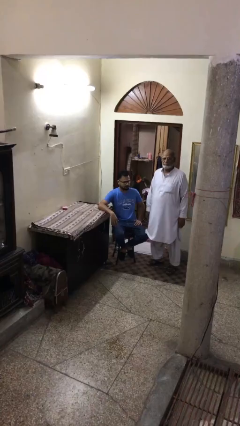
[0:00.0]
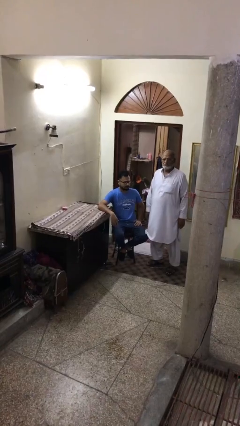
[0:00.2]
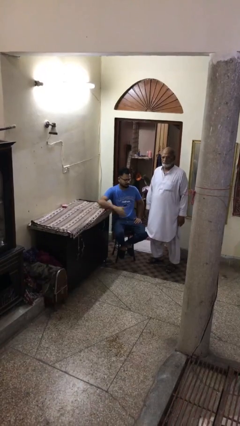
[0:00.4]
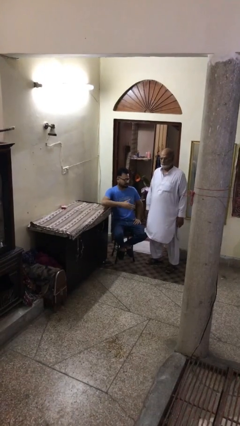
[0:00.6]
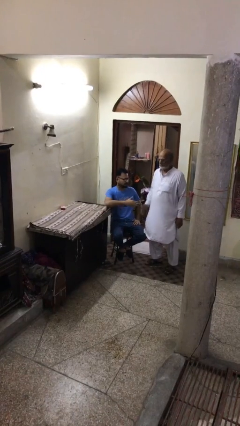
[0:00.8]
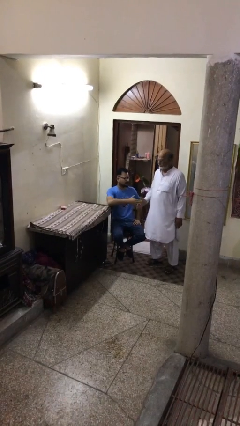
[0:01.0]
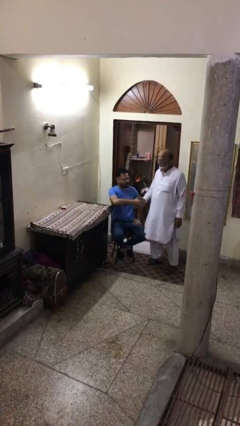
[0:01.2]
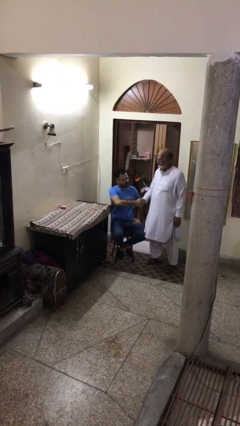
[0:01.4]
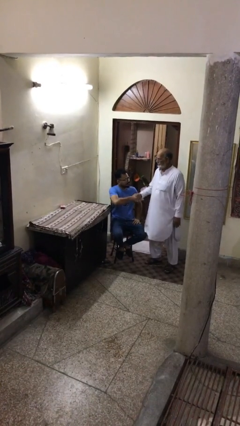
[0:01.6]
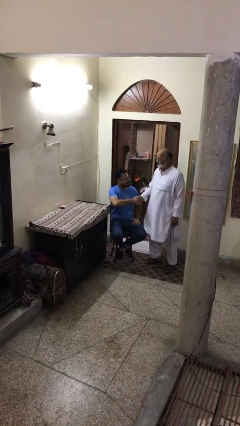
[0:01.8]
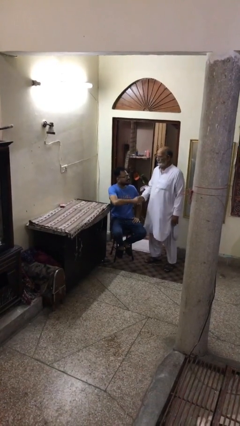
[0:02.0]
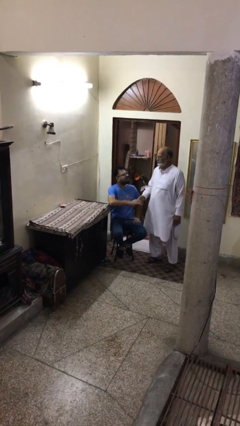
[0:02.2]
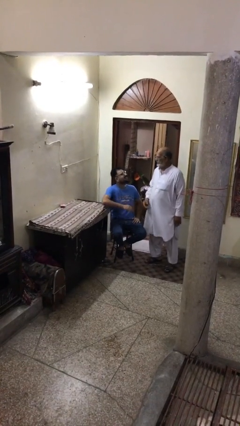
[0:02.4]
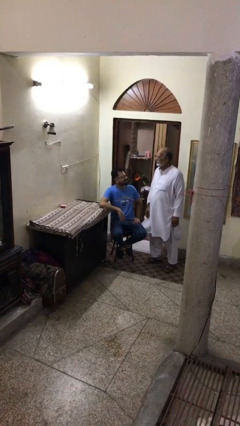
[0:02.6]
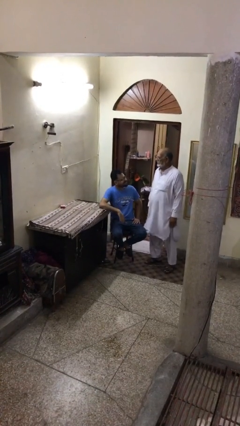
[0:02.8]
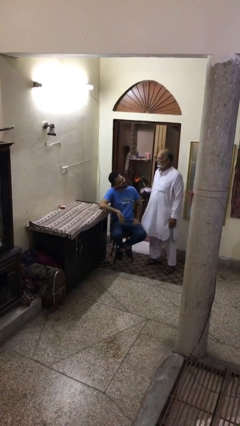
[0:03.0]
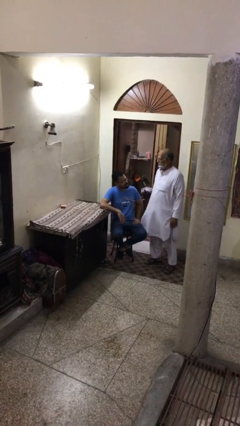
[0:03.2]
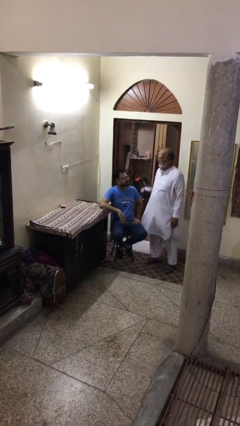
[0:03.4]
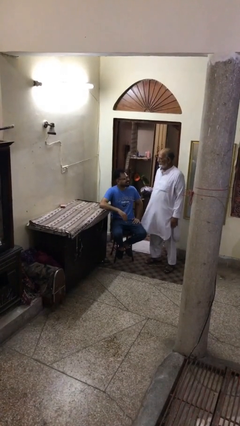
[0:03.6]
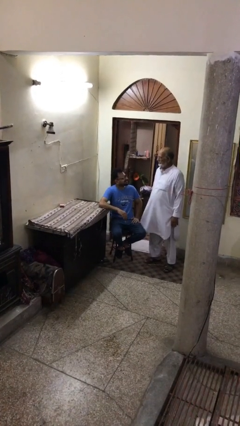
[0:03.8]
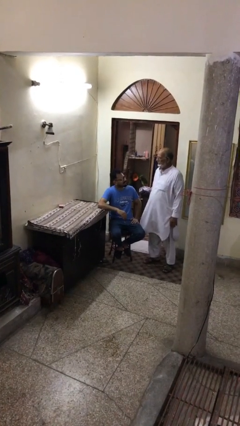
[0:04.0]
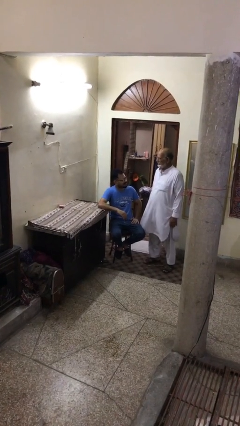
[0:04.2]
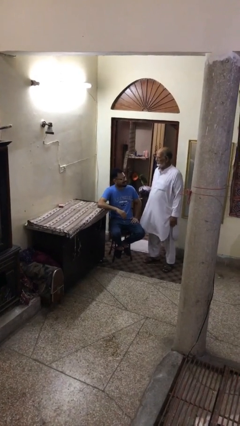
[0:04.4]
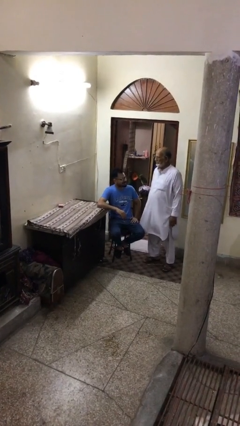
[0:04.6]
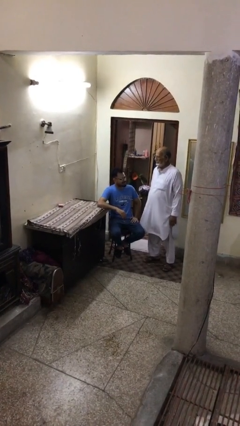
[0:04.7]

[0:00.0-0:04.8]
person shakes hand

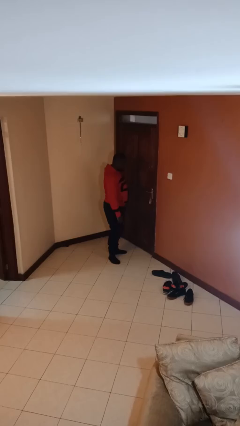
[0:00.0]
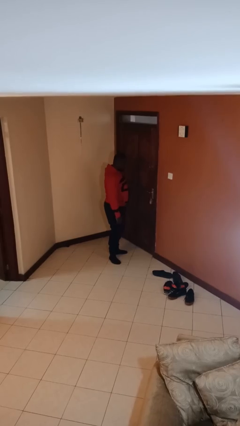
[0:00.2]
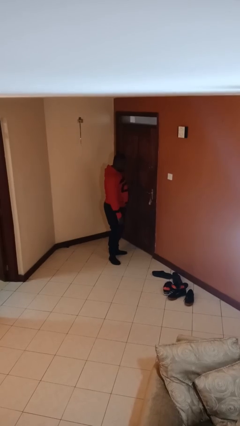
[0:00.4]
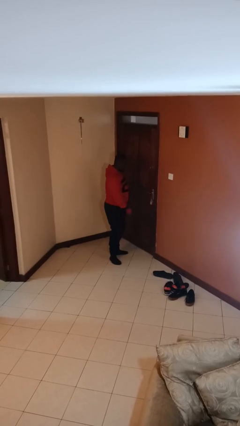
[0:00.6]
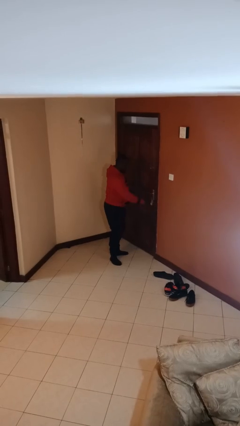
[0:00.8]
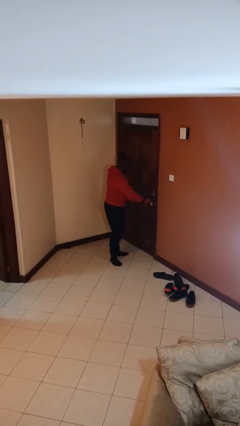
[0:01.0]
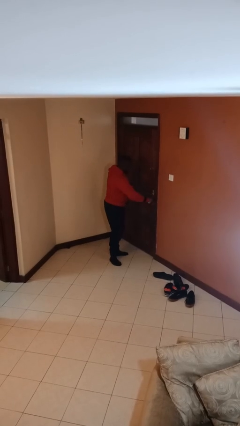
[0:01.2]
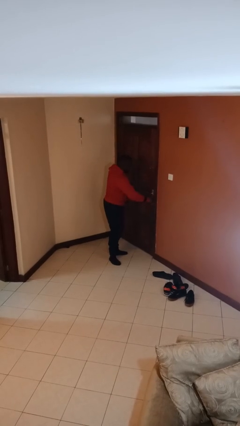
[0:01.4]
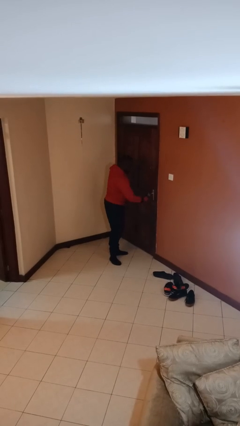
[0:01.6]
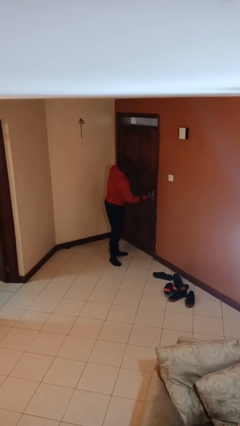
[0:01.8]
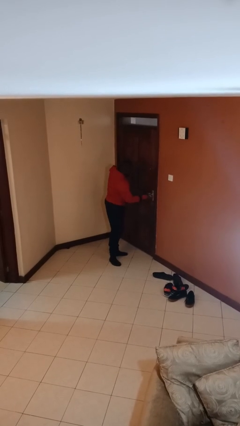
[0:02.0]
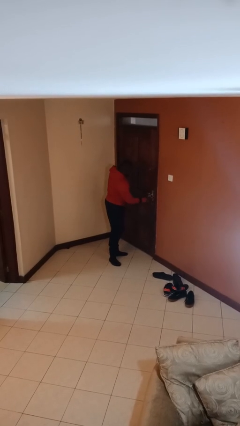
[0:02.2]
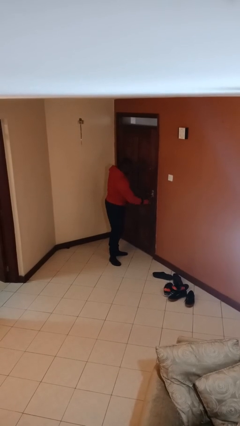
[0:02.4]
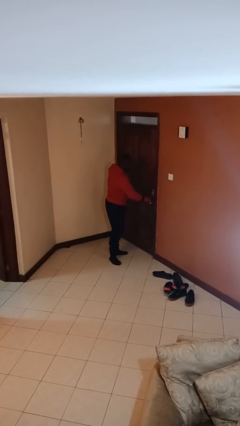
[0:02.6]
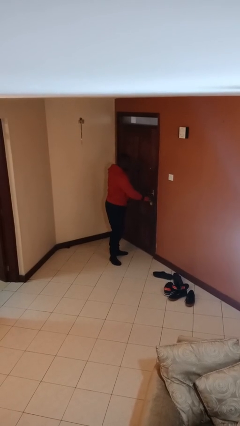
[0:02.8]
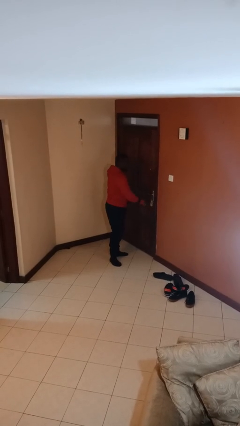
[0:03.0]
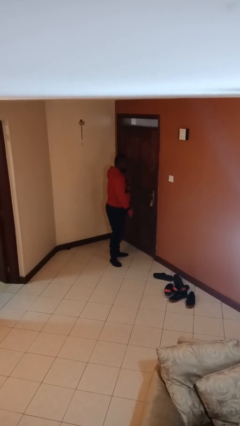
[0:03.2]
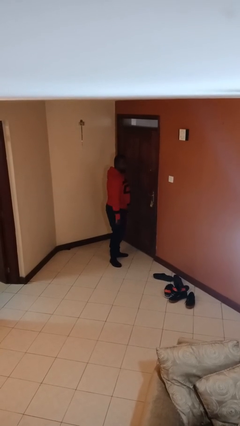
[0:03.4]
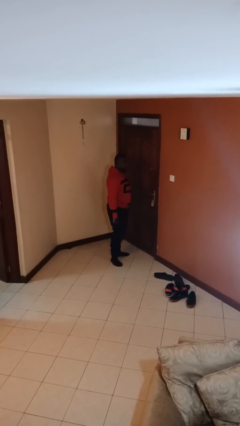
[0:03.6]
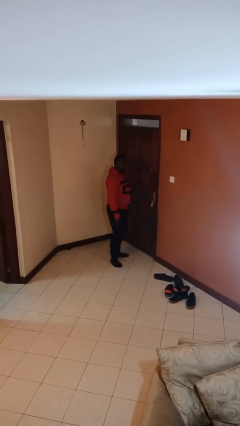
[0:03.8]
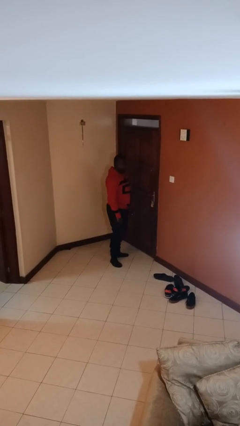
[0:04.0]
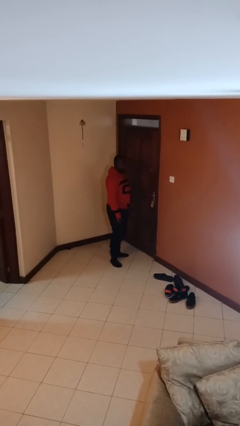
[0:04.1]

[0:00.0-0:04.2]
person locks door with keys

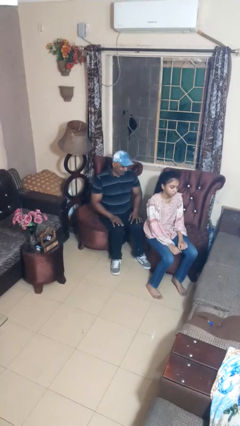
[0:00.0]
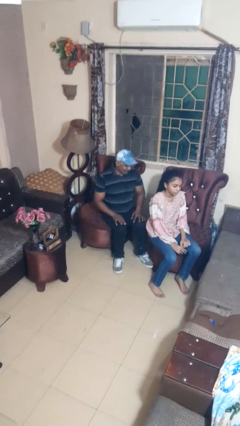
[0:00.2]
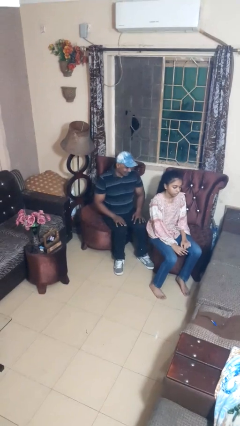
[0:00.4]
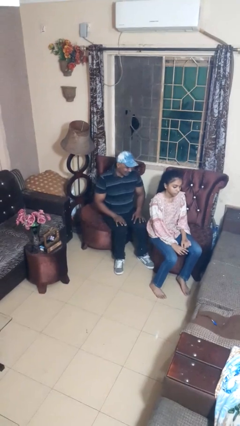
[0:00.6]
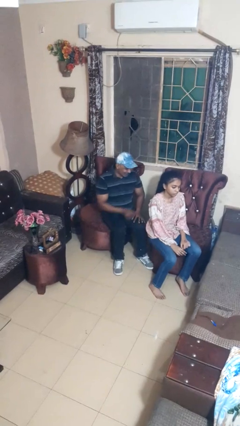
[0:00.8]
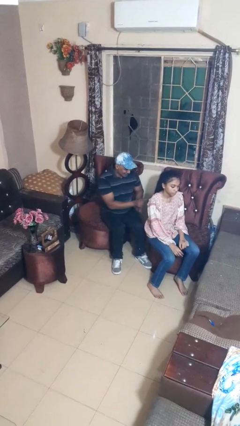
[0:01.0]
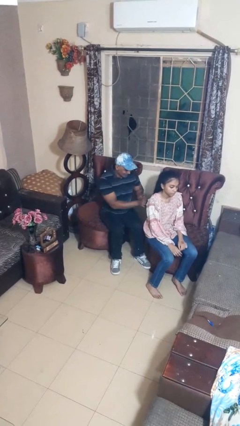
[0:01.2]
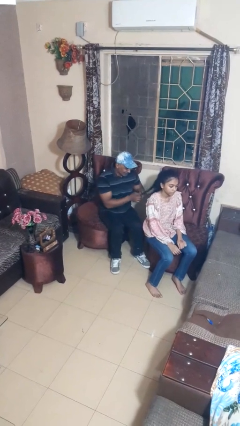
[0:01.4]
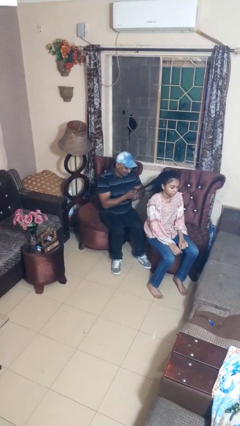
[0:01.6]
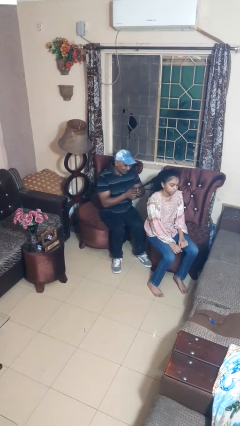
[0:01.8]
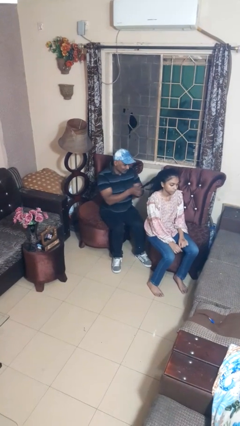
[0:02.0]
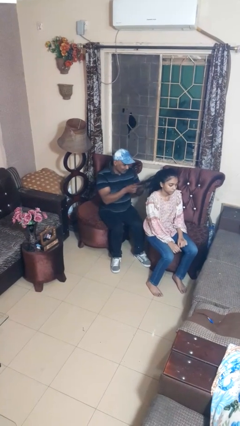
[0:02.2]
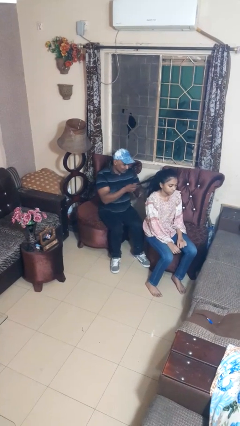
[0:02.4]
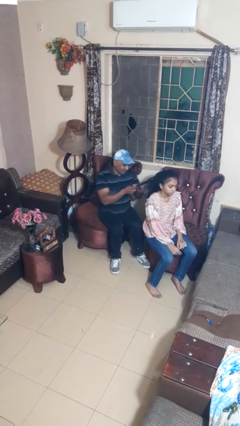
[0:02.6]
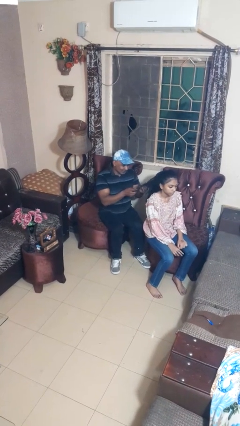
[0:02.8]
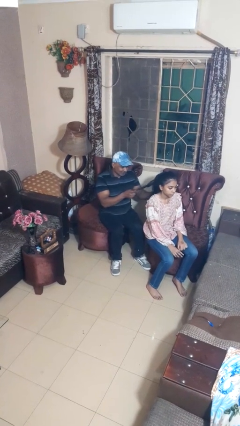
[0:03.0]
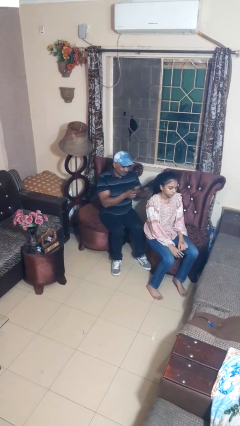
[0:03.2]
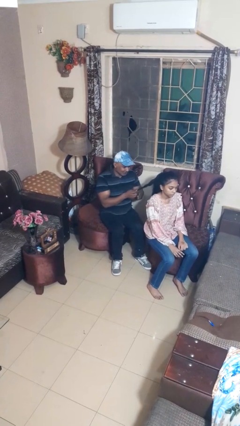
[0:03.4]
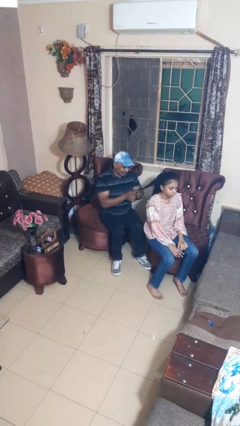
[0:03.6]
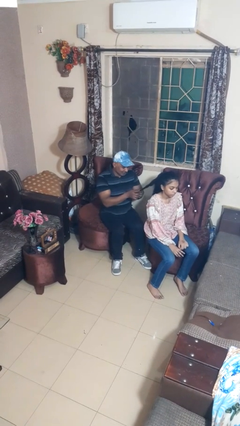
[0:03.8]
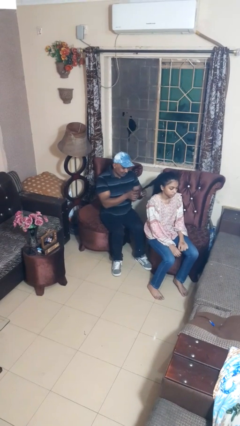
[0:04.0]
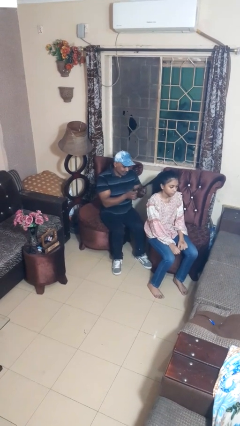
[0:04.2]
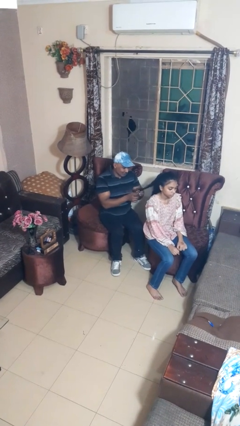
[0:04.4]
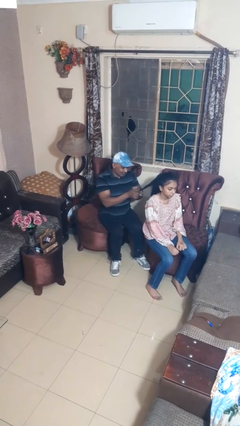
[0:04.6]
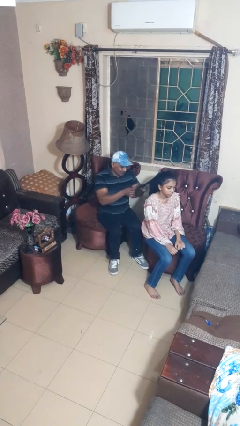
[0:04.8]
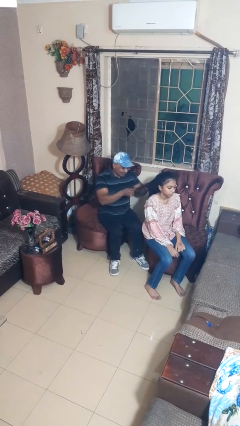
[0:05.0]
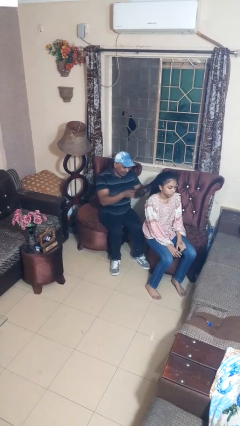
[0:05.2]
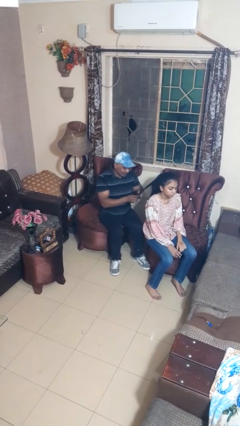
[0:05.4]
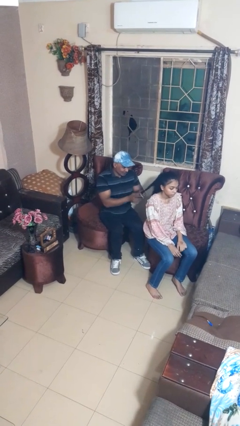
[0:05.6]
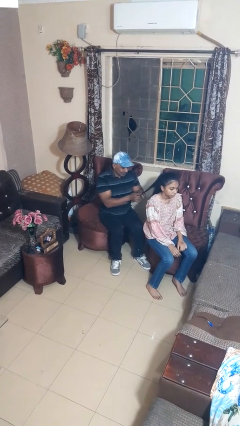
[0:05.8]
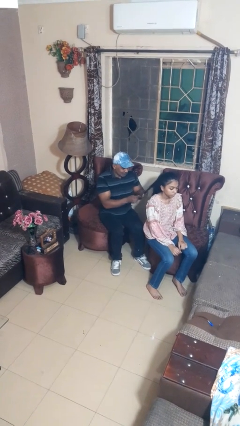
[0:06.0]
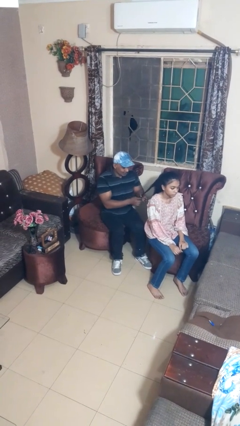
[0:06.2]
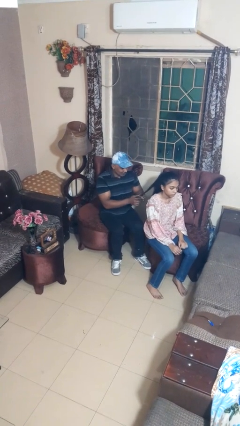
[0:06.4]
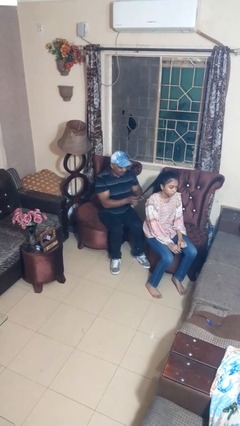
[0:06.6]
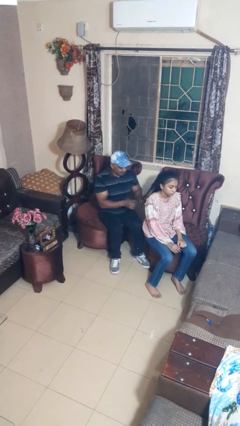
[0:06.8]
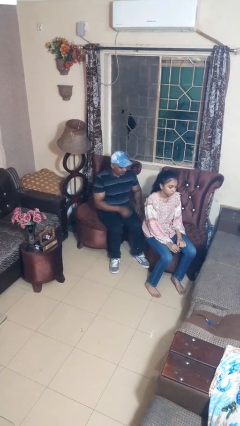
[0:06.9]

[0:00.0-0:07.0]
person braids hair of person

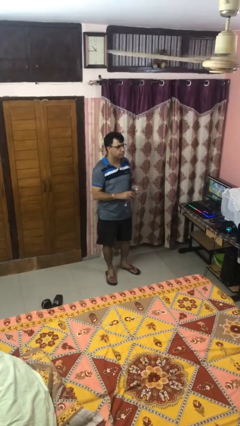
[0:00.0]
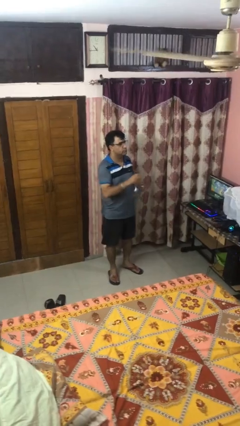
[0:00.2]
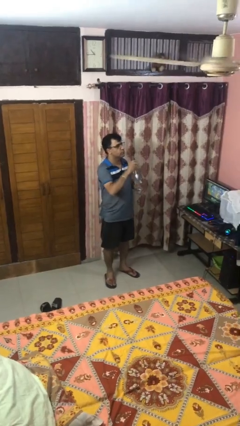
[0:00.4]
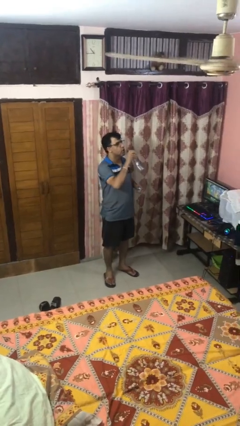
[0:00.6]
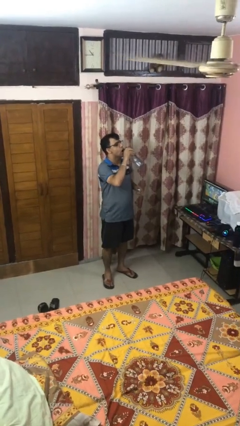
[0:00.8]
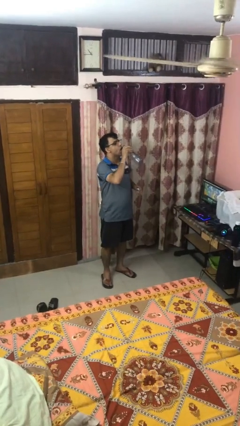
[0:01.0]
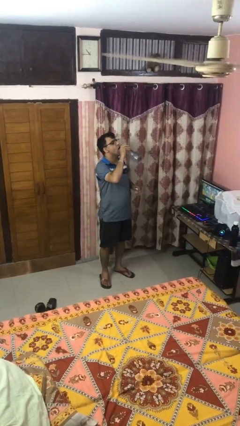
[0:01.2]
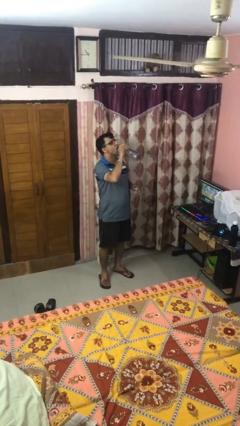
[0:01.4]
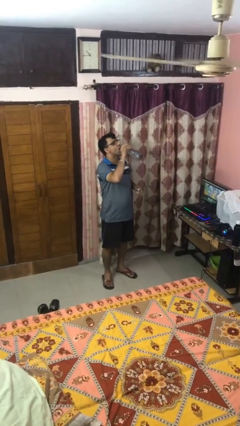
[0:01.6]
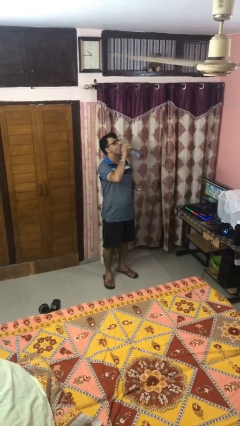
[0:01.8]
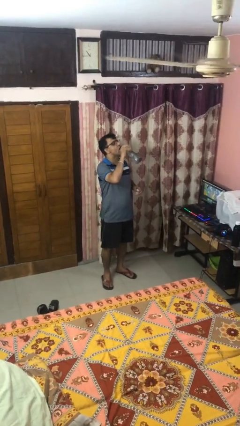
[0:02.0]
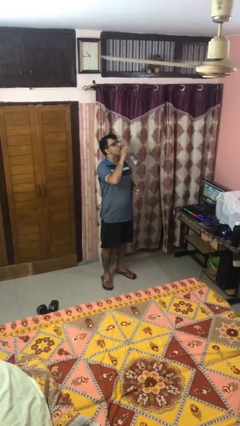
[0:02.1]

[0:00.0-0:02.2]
person drinks from bottle
